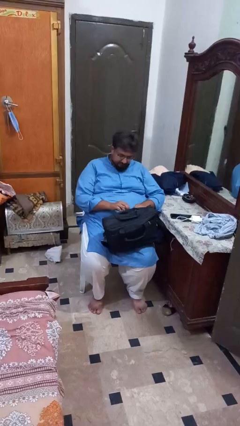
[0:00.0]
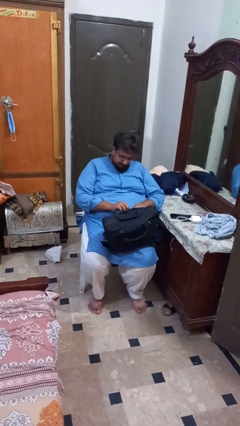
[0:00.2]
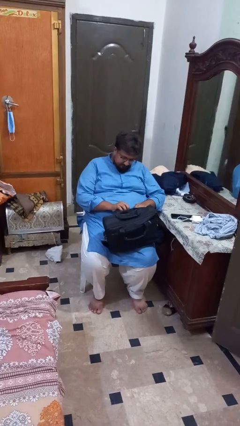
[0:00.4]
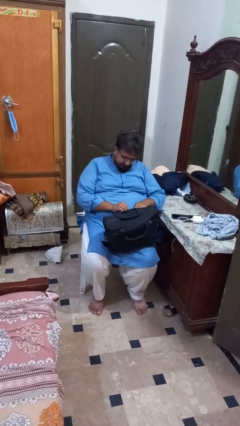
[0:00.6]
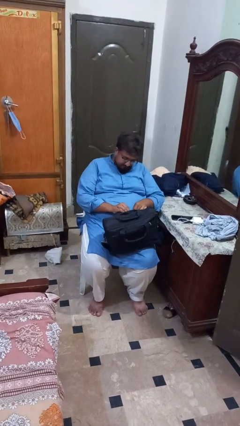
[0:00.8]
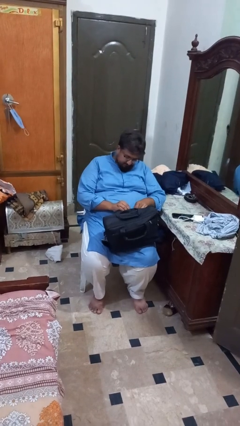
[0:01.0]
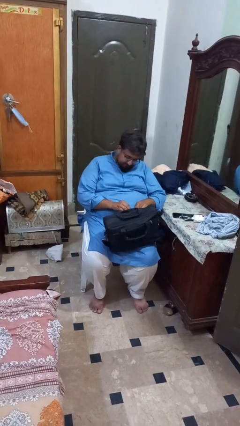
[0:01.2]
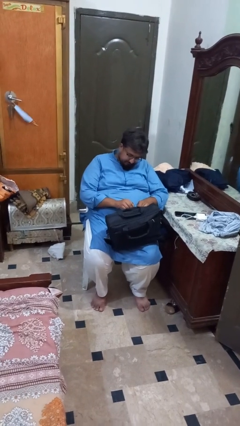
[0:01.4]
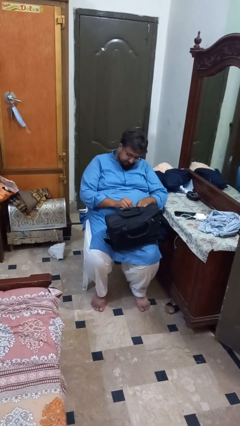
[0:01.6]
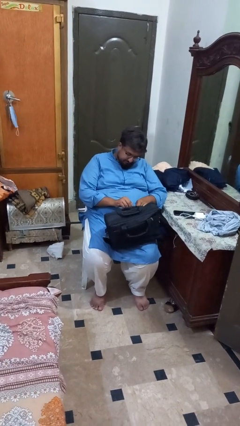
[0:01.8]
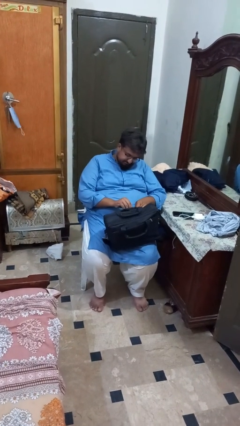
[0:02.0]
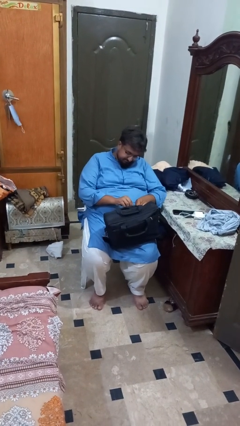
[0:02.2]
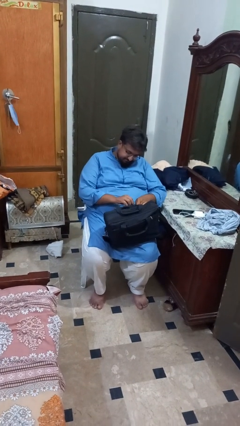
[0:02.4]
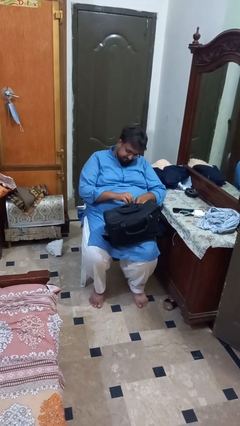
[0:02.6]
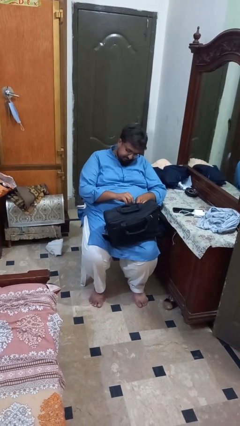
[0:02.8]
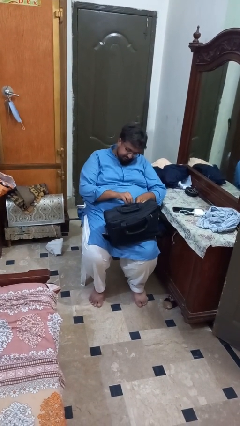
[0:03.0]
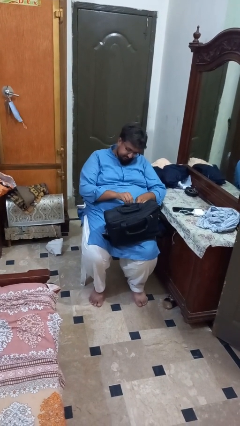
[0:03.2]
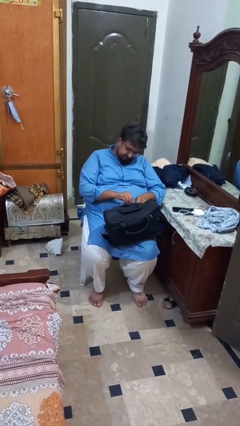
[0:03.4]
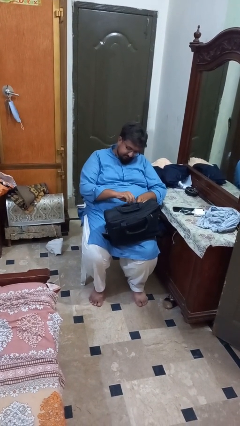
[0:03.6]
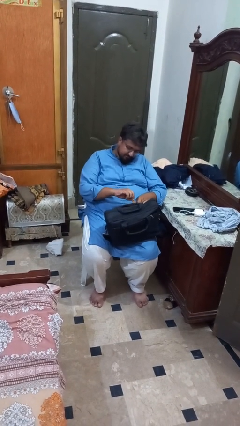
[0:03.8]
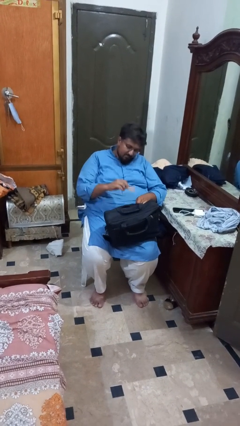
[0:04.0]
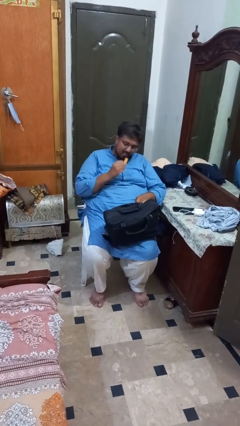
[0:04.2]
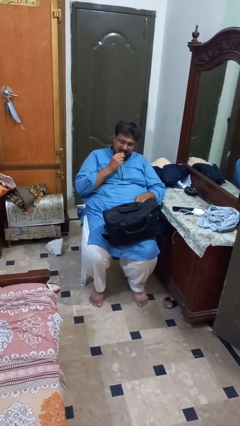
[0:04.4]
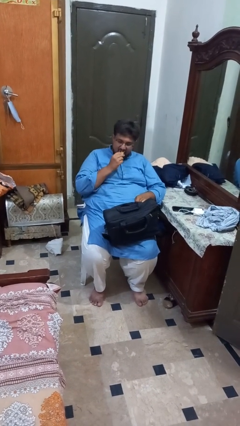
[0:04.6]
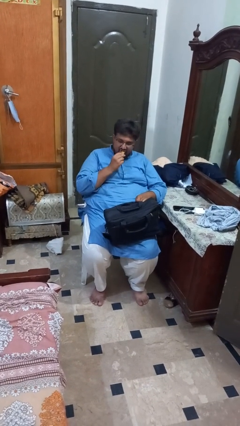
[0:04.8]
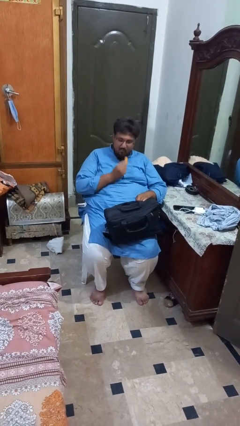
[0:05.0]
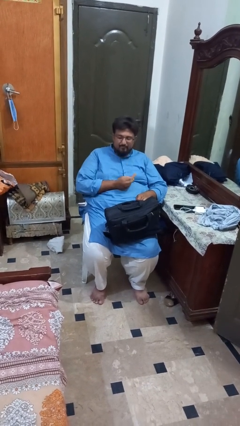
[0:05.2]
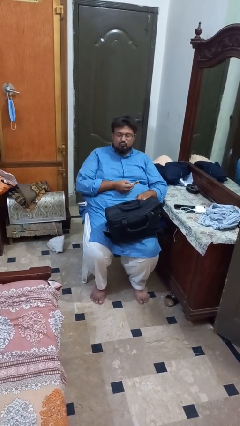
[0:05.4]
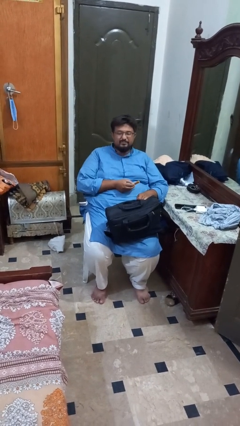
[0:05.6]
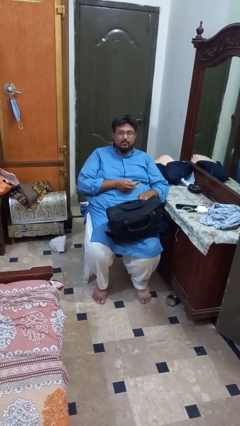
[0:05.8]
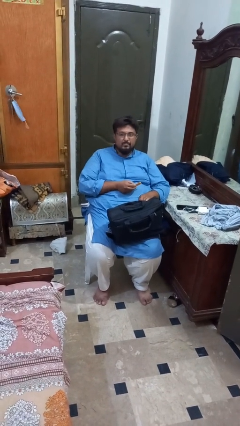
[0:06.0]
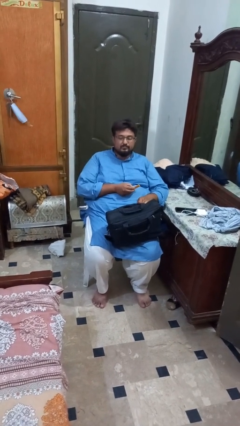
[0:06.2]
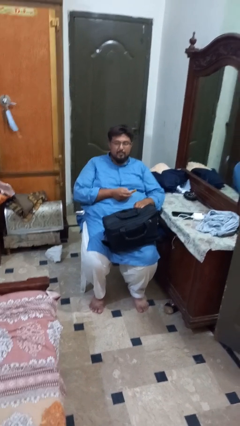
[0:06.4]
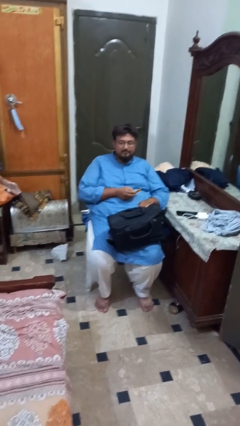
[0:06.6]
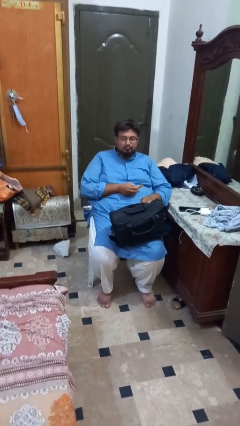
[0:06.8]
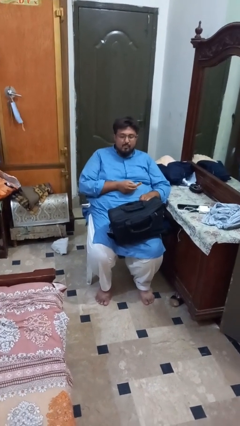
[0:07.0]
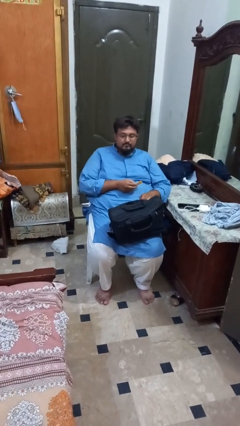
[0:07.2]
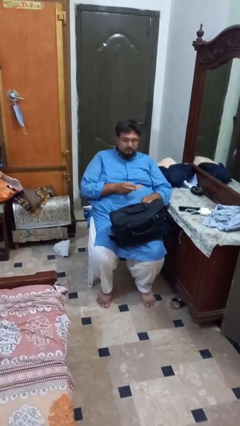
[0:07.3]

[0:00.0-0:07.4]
person eats snack from bag

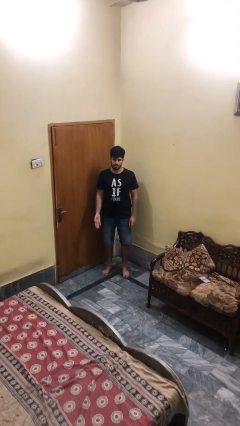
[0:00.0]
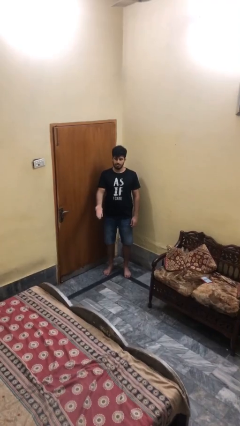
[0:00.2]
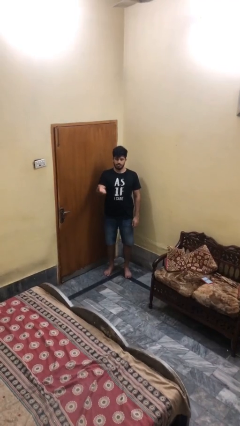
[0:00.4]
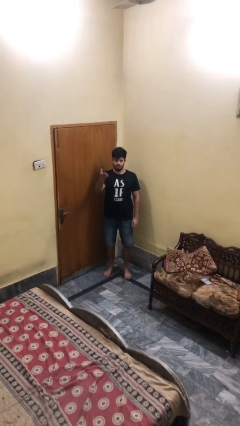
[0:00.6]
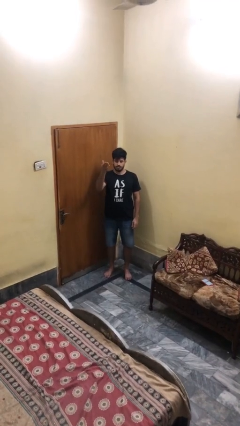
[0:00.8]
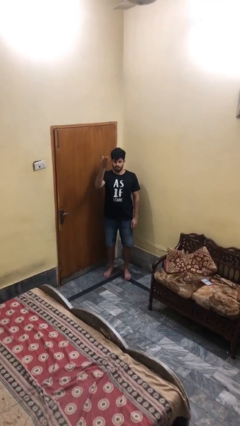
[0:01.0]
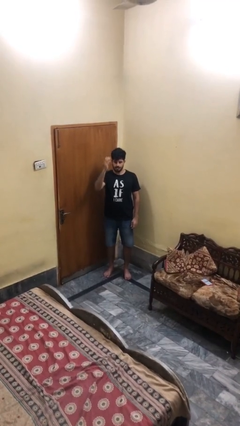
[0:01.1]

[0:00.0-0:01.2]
person gestures swipe up

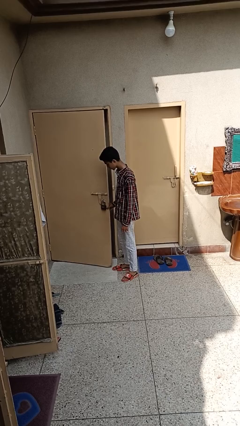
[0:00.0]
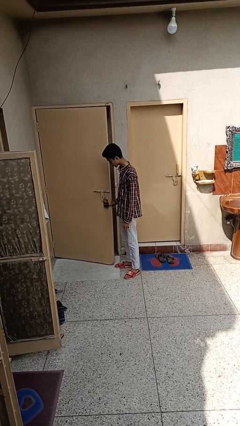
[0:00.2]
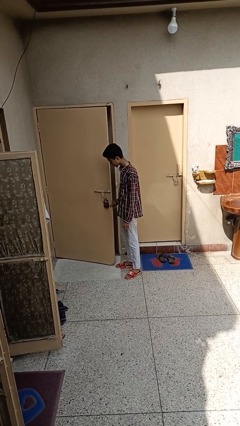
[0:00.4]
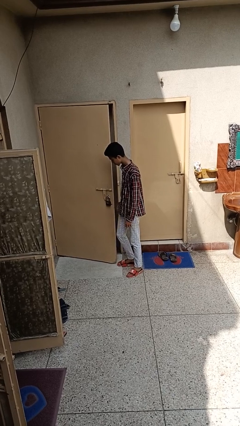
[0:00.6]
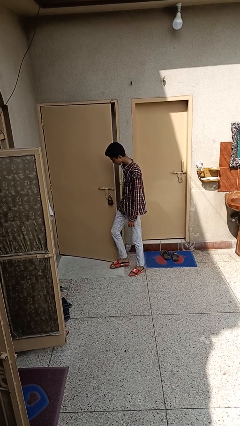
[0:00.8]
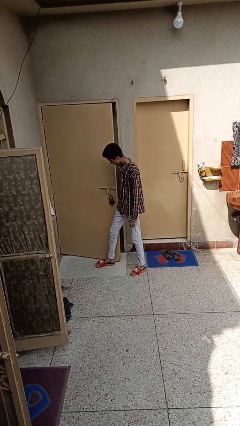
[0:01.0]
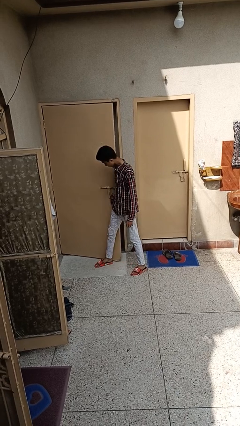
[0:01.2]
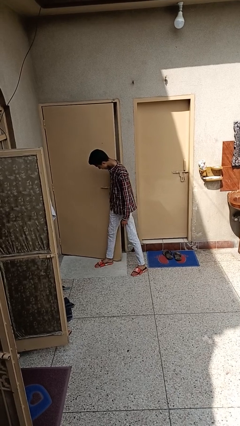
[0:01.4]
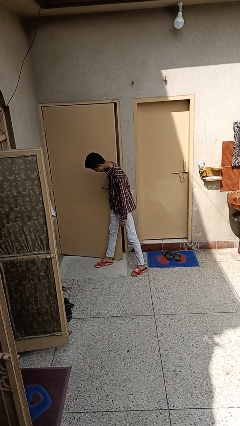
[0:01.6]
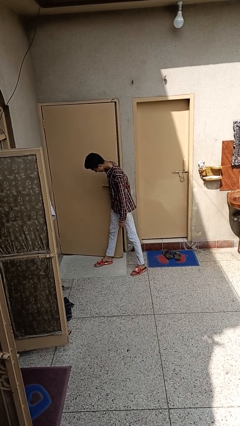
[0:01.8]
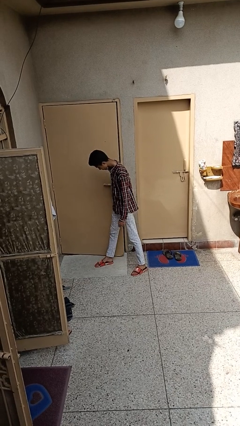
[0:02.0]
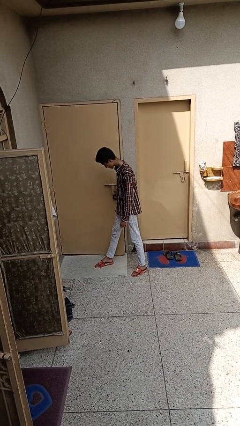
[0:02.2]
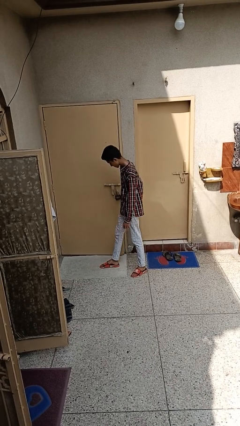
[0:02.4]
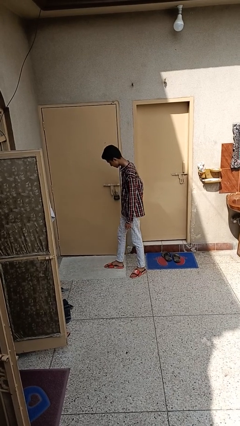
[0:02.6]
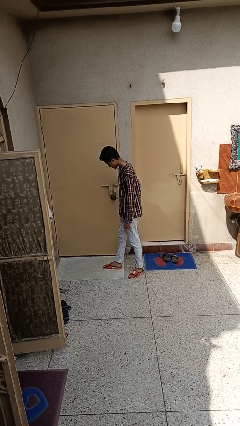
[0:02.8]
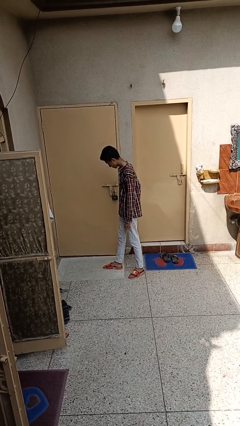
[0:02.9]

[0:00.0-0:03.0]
person closes door with hip

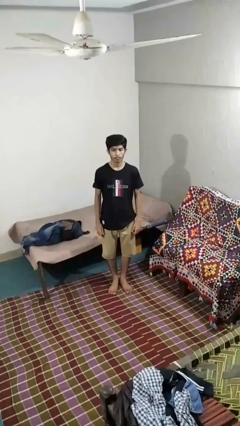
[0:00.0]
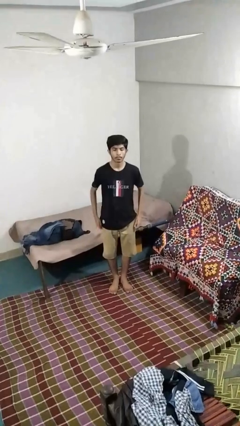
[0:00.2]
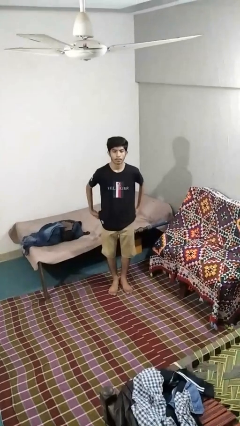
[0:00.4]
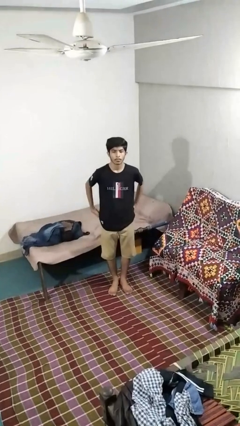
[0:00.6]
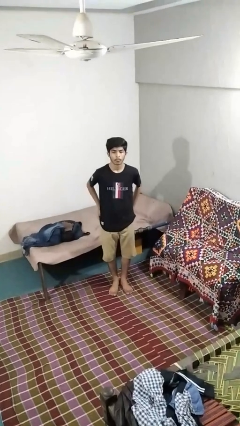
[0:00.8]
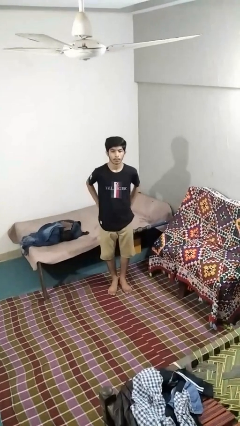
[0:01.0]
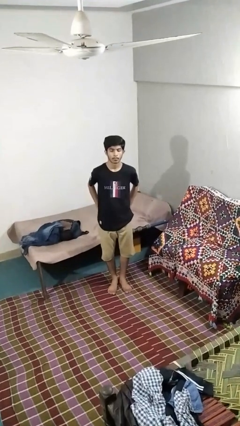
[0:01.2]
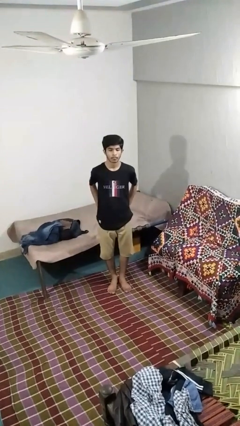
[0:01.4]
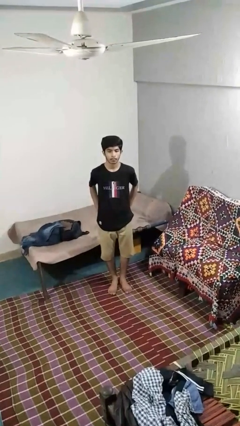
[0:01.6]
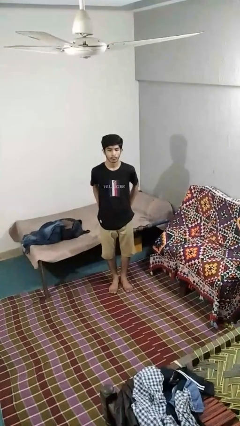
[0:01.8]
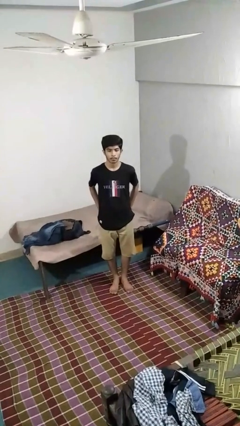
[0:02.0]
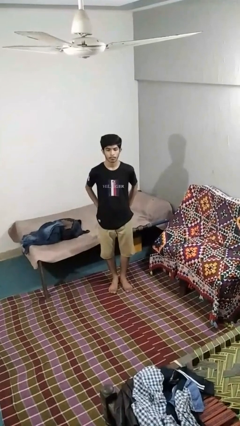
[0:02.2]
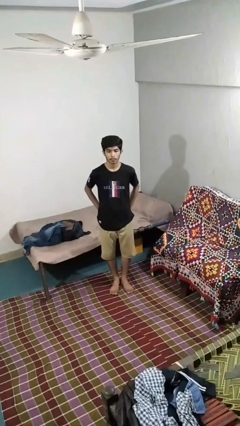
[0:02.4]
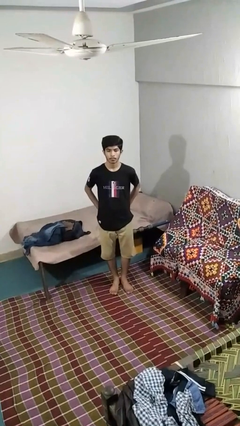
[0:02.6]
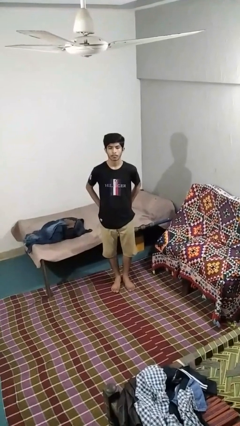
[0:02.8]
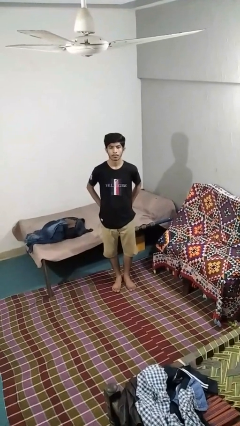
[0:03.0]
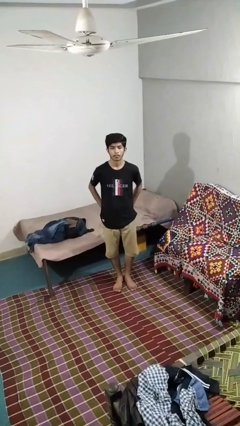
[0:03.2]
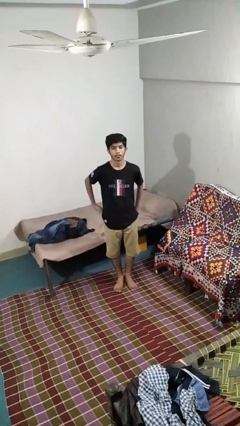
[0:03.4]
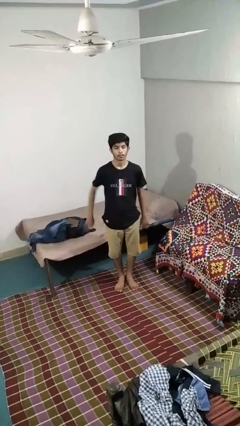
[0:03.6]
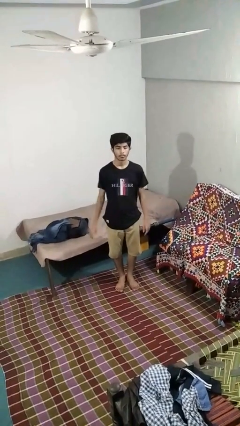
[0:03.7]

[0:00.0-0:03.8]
person puts hands in back pockets

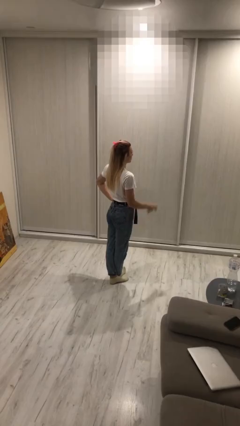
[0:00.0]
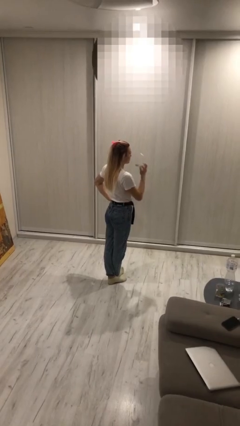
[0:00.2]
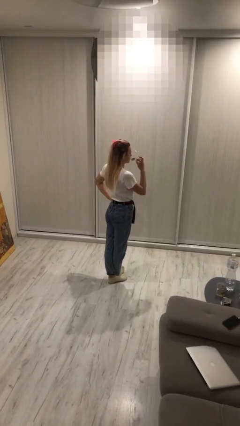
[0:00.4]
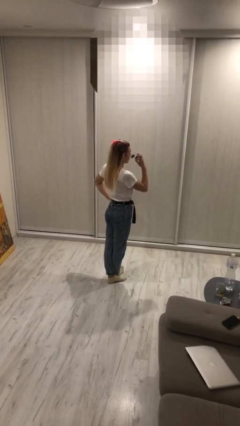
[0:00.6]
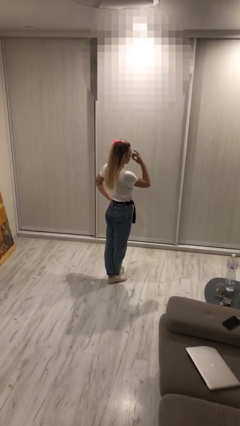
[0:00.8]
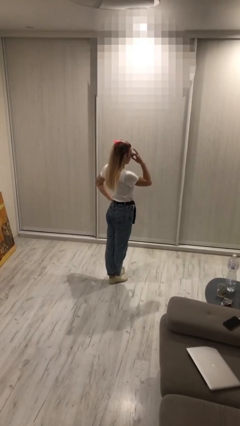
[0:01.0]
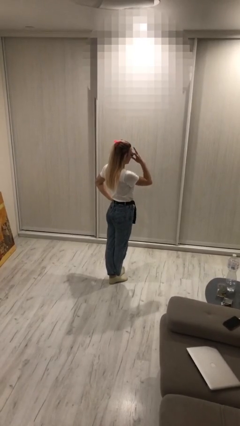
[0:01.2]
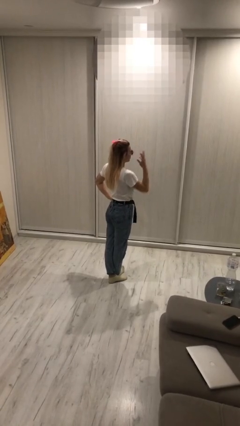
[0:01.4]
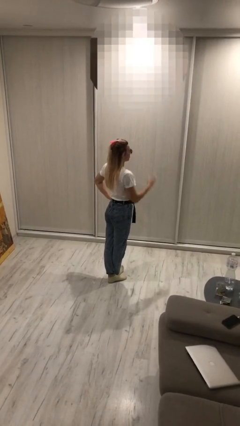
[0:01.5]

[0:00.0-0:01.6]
person puts on sunglasses

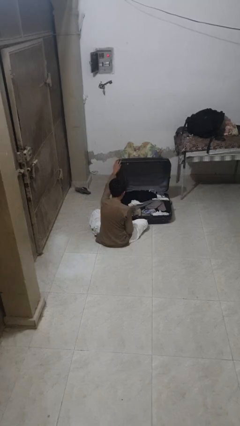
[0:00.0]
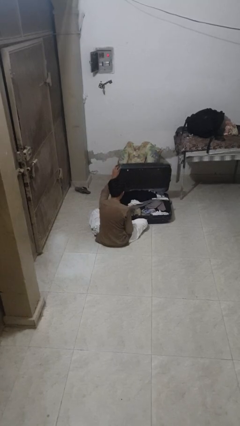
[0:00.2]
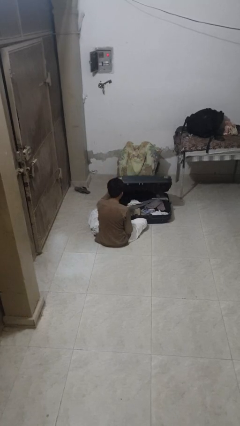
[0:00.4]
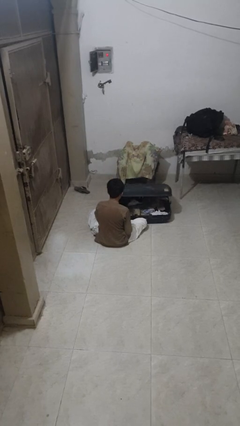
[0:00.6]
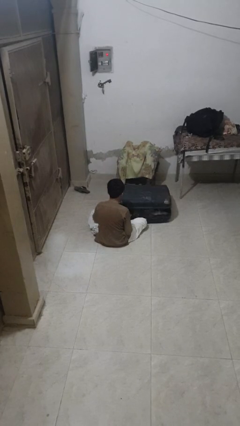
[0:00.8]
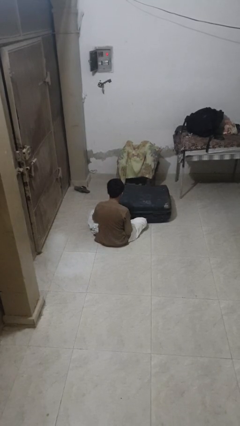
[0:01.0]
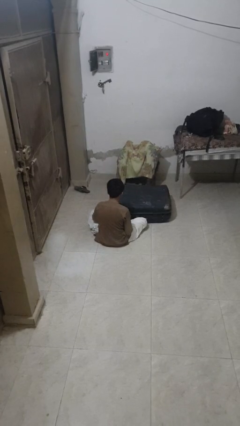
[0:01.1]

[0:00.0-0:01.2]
person closes suitcase
